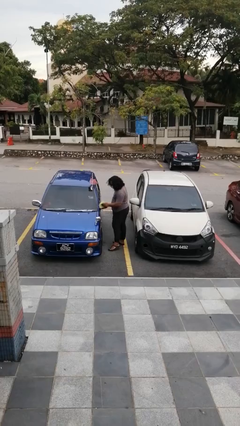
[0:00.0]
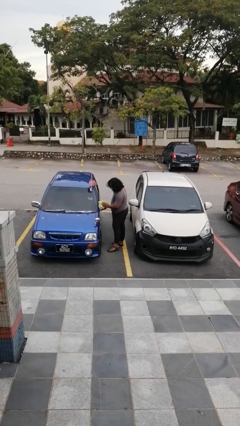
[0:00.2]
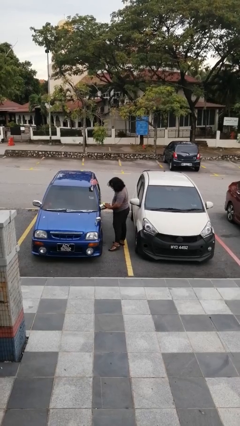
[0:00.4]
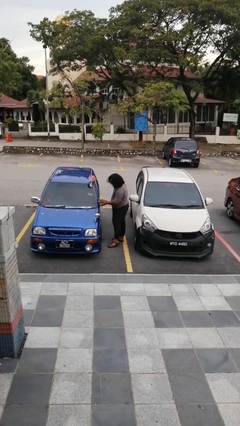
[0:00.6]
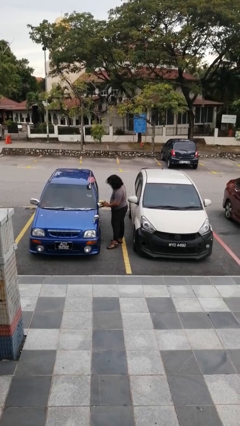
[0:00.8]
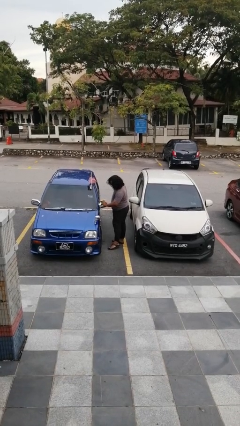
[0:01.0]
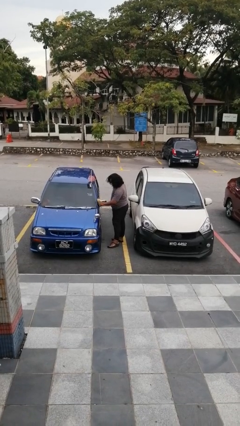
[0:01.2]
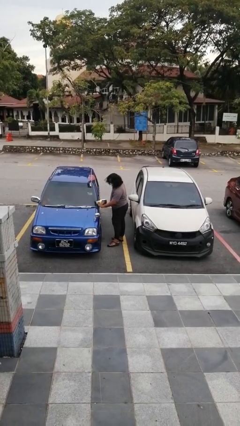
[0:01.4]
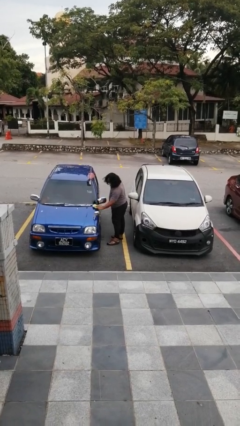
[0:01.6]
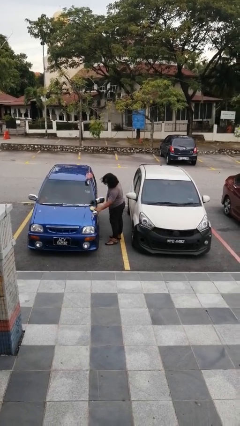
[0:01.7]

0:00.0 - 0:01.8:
person polishes car with rag

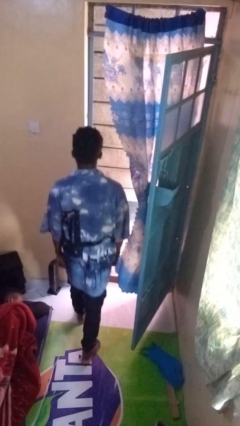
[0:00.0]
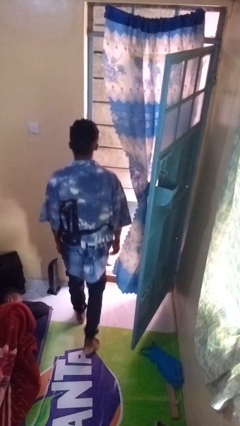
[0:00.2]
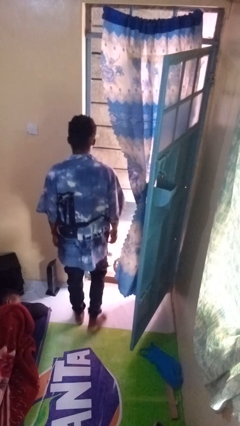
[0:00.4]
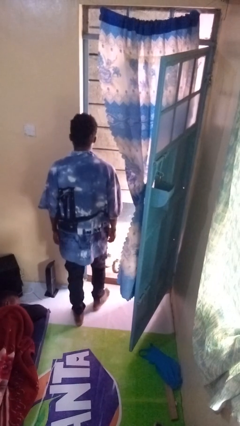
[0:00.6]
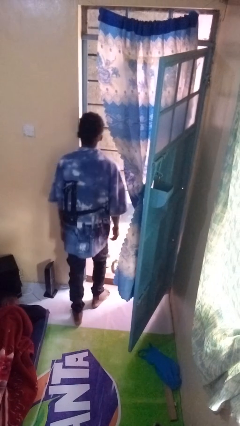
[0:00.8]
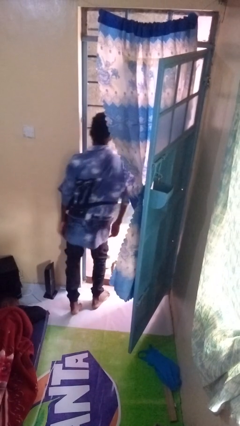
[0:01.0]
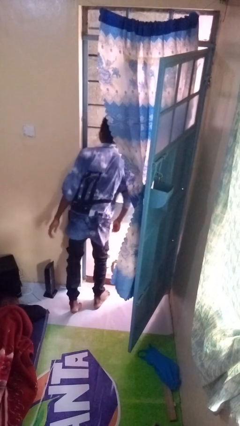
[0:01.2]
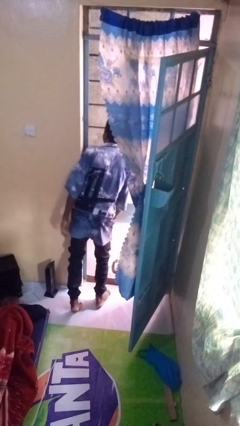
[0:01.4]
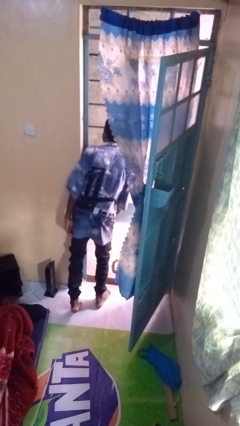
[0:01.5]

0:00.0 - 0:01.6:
person bumps into wall

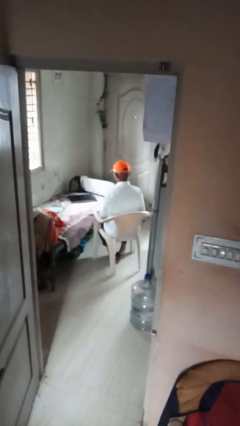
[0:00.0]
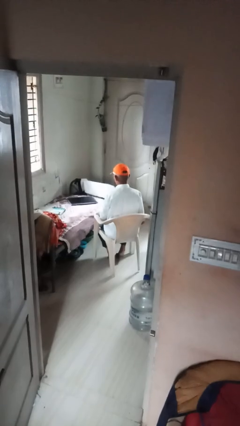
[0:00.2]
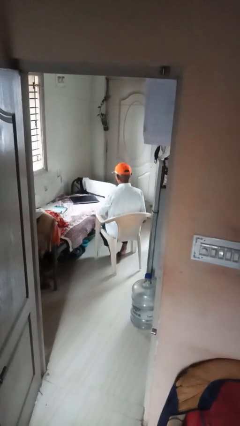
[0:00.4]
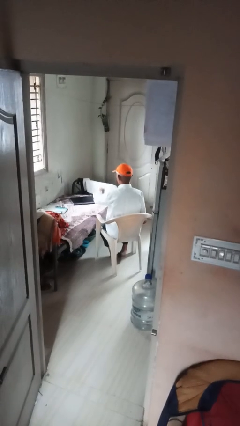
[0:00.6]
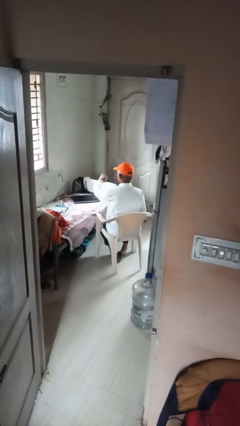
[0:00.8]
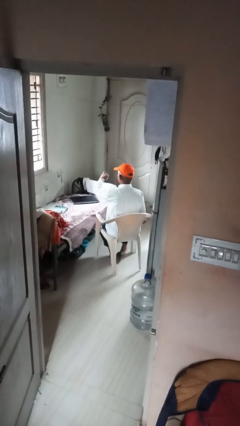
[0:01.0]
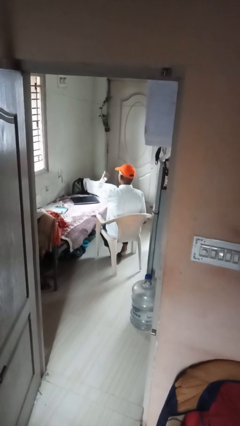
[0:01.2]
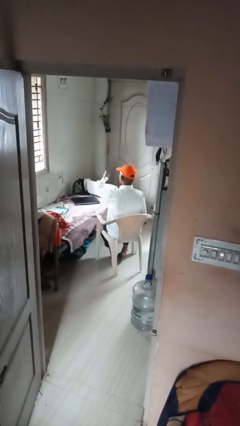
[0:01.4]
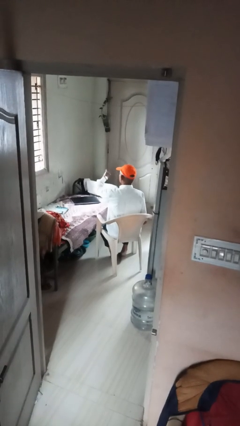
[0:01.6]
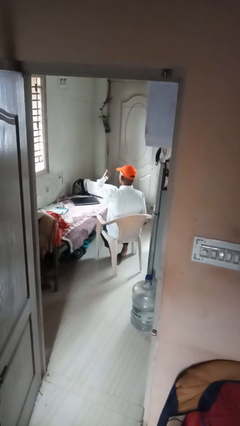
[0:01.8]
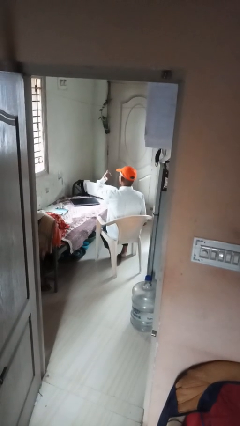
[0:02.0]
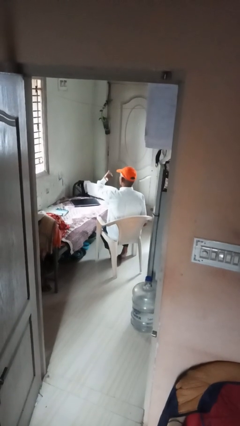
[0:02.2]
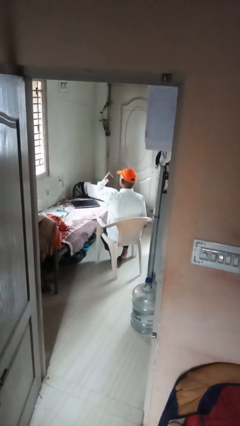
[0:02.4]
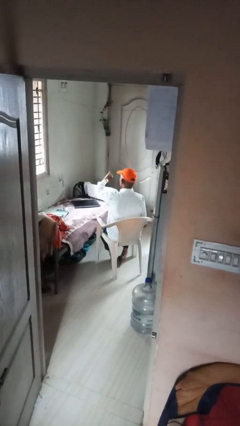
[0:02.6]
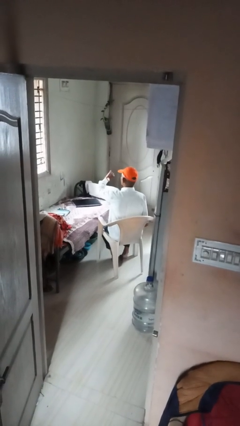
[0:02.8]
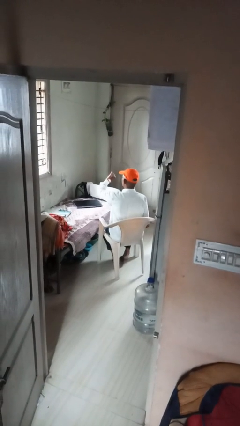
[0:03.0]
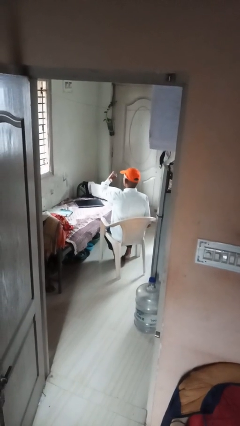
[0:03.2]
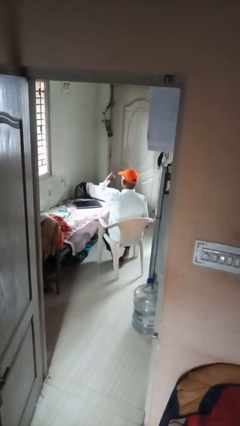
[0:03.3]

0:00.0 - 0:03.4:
person looks at wristwatch

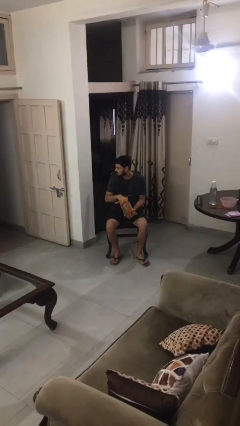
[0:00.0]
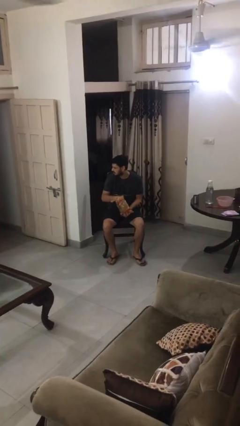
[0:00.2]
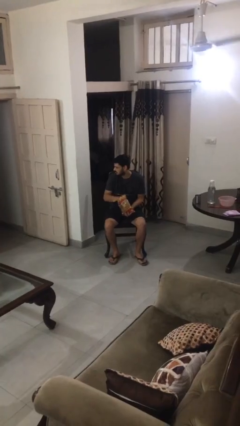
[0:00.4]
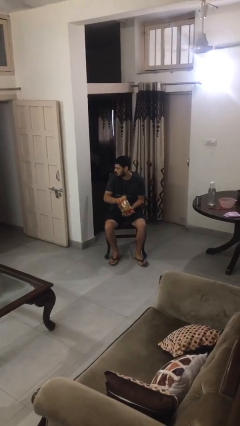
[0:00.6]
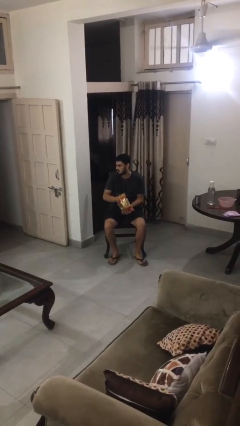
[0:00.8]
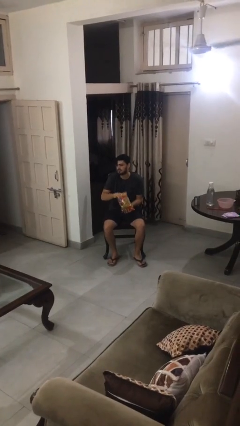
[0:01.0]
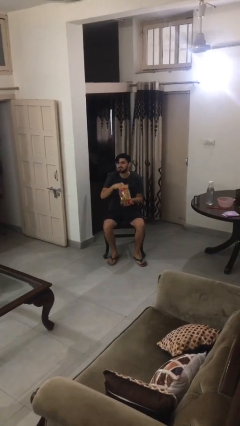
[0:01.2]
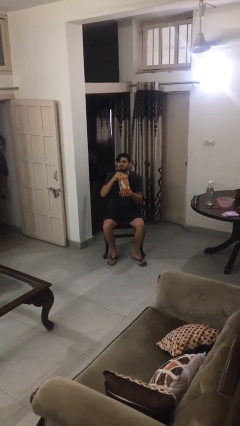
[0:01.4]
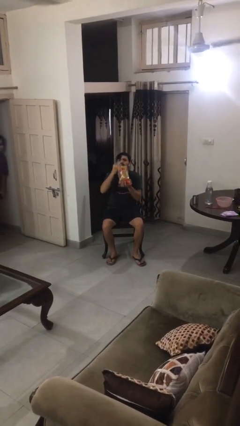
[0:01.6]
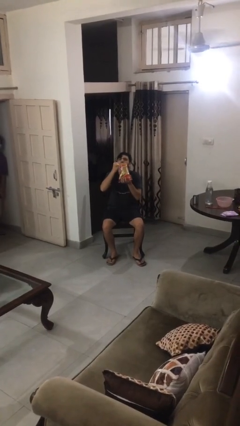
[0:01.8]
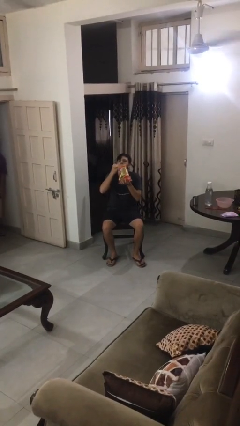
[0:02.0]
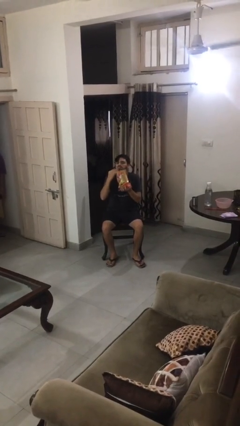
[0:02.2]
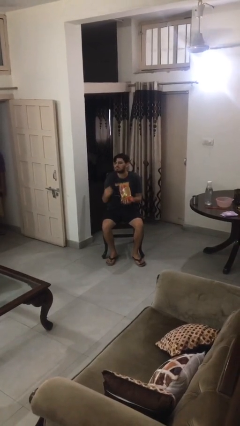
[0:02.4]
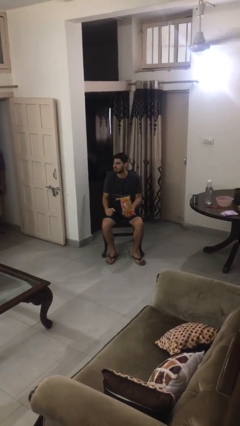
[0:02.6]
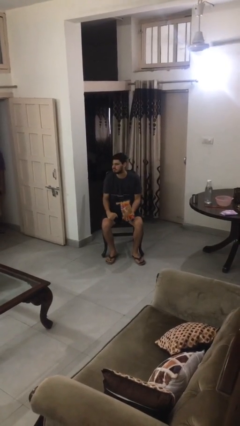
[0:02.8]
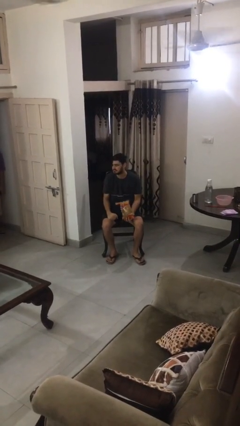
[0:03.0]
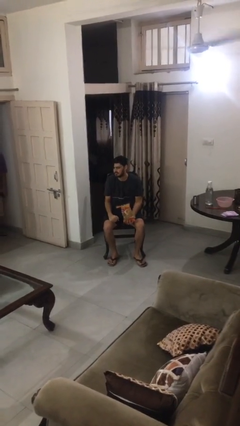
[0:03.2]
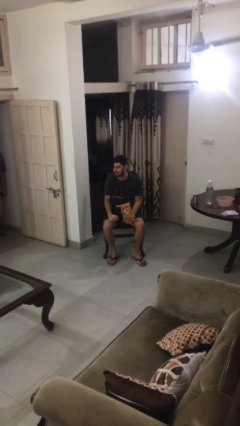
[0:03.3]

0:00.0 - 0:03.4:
person eats snack from bag

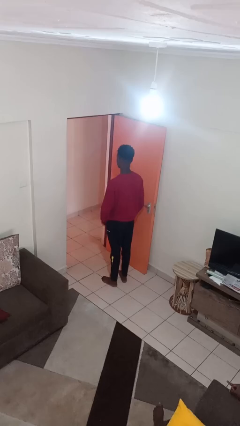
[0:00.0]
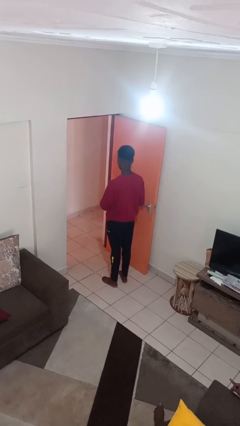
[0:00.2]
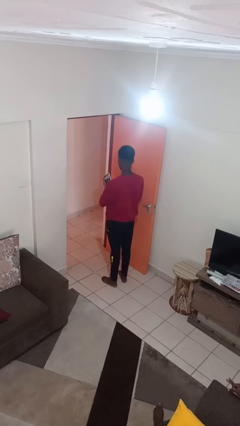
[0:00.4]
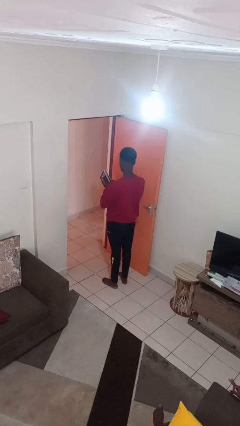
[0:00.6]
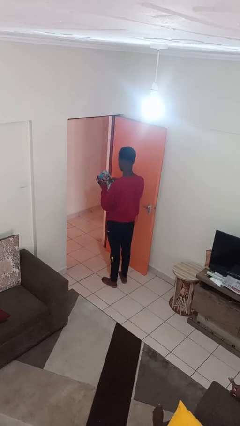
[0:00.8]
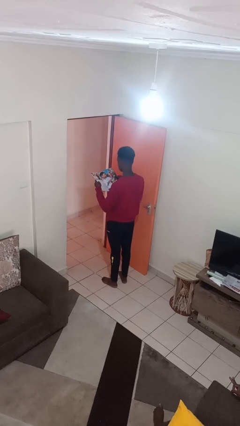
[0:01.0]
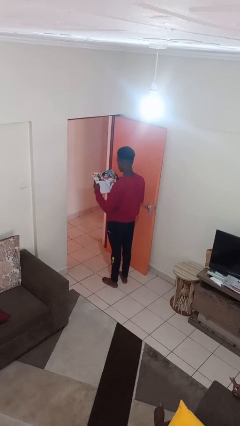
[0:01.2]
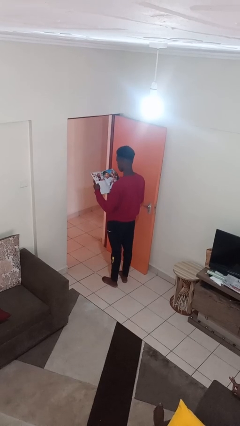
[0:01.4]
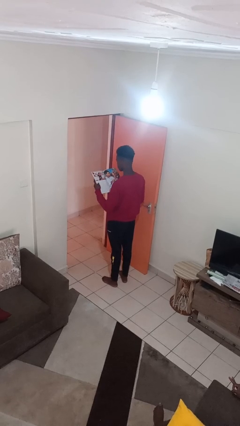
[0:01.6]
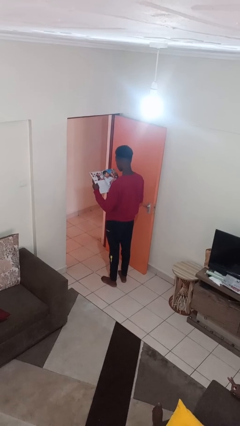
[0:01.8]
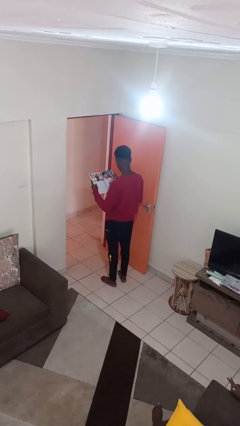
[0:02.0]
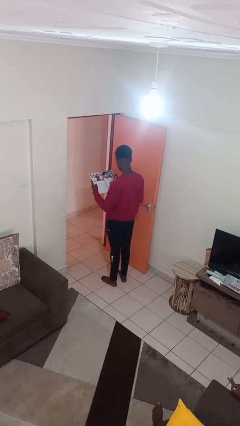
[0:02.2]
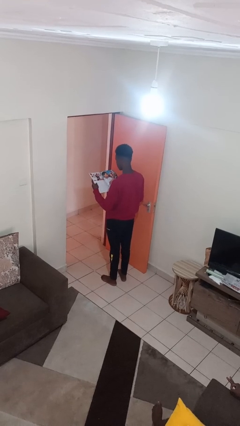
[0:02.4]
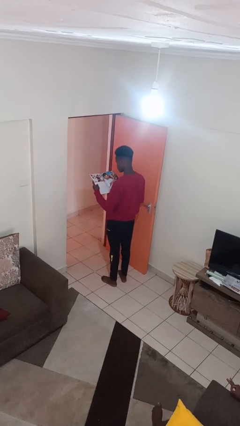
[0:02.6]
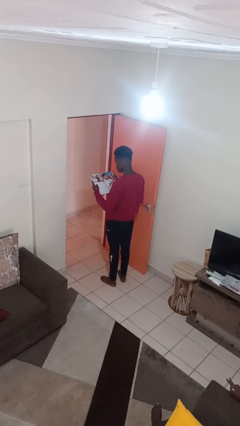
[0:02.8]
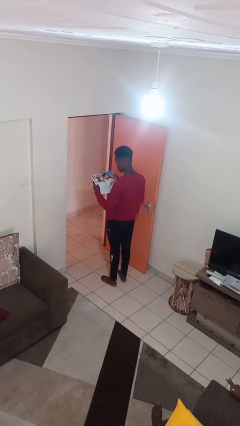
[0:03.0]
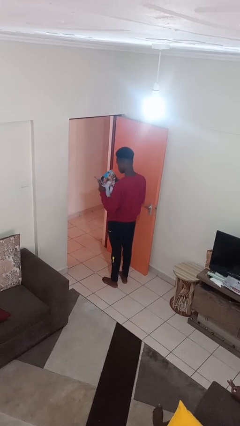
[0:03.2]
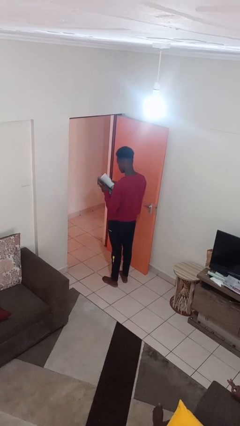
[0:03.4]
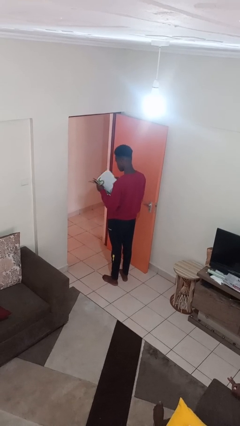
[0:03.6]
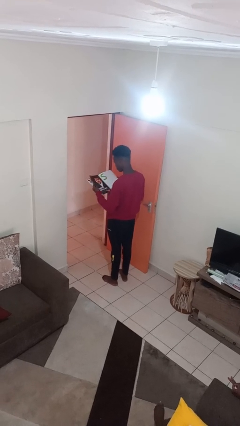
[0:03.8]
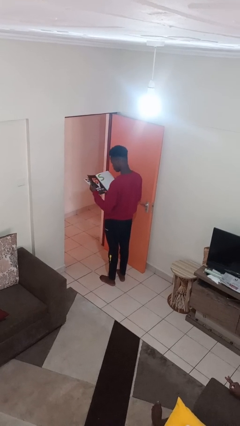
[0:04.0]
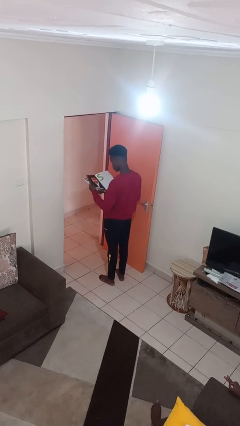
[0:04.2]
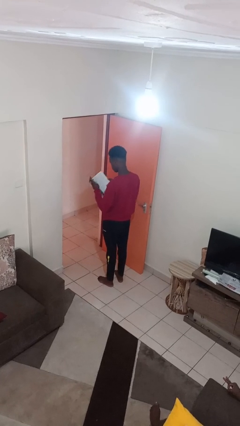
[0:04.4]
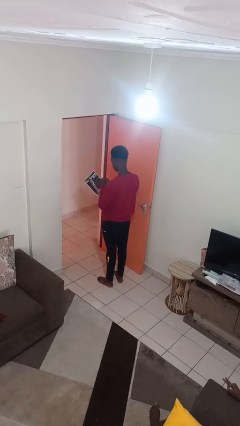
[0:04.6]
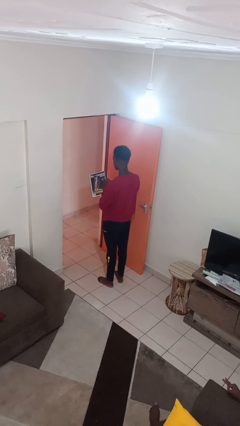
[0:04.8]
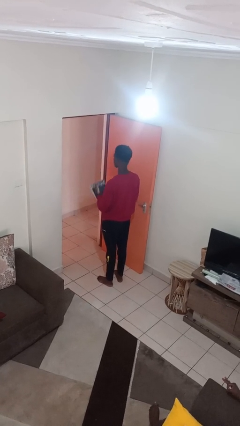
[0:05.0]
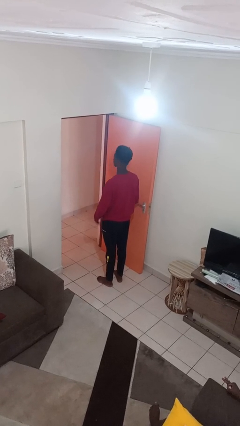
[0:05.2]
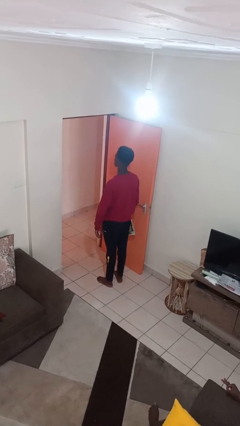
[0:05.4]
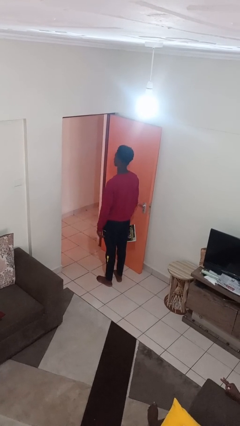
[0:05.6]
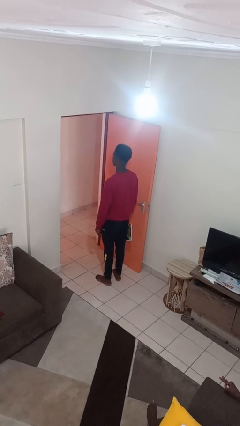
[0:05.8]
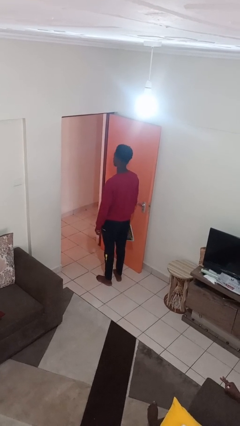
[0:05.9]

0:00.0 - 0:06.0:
person reads magazine

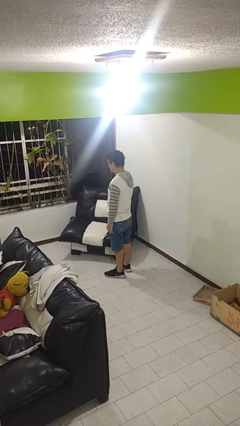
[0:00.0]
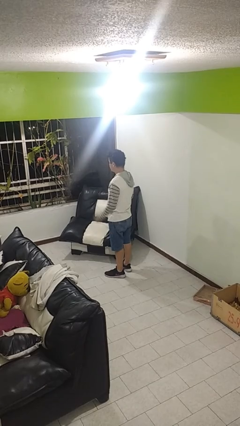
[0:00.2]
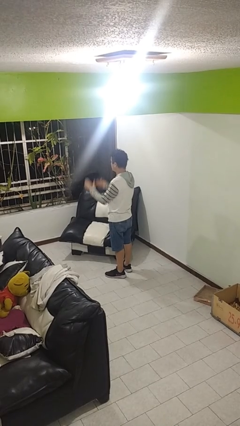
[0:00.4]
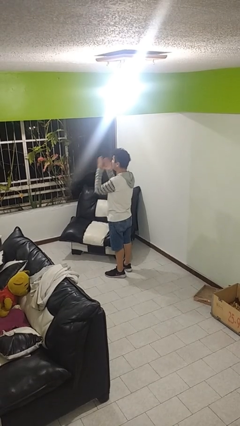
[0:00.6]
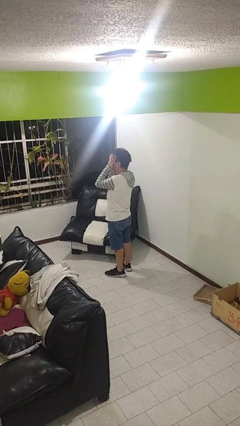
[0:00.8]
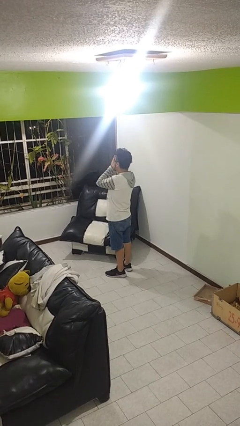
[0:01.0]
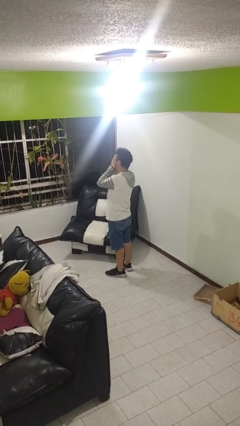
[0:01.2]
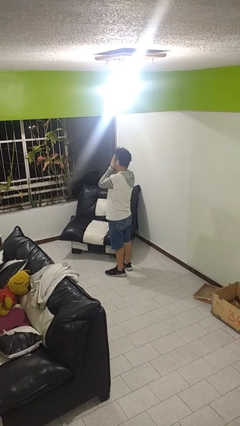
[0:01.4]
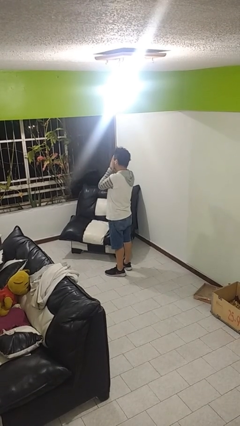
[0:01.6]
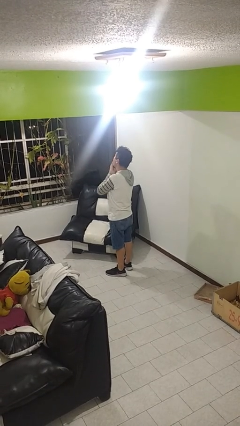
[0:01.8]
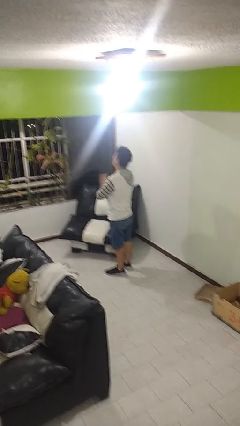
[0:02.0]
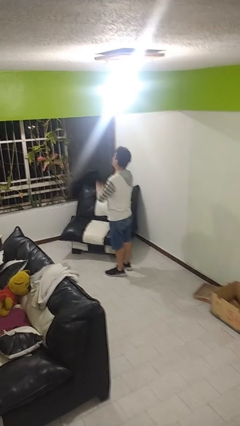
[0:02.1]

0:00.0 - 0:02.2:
person covers face with hands
